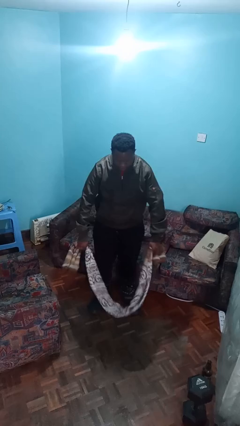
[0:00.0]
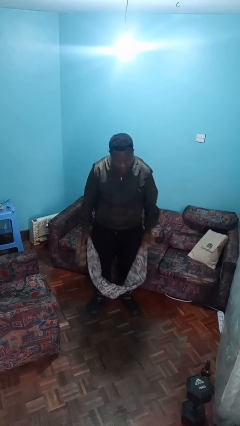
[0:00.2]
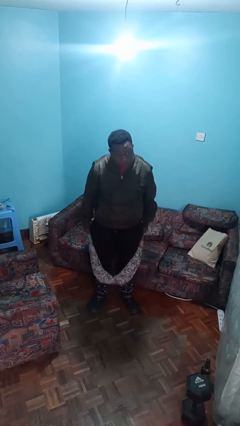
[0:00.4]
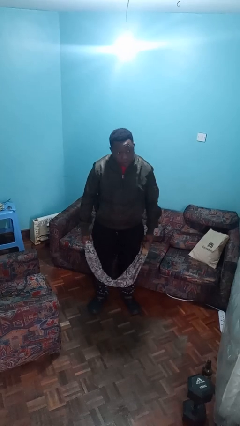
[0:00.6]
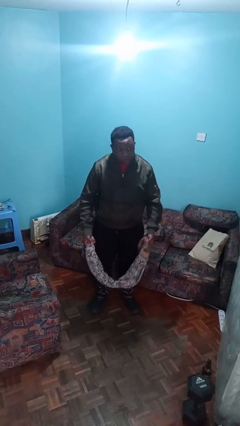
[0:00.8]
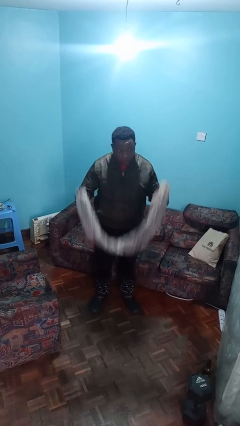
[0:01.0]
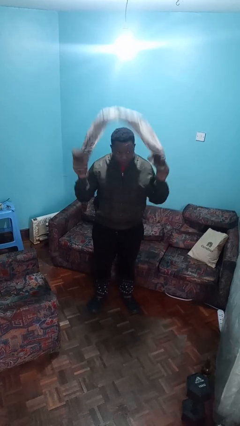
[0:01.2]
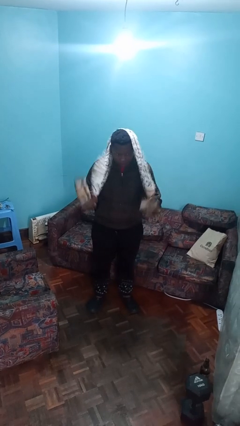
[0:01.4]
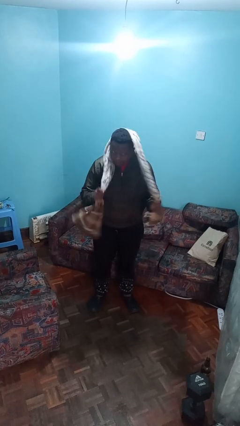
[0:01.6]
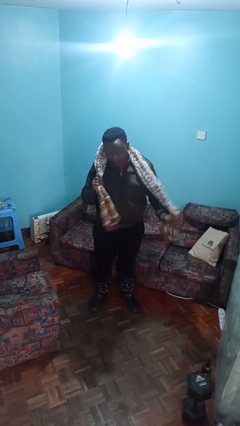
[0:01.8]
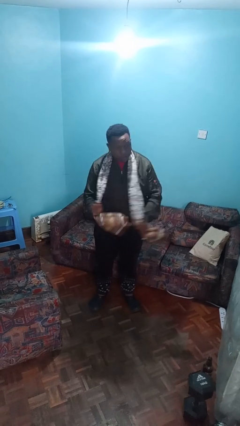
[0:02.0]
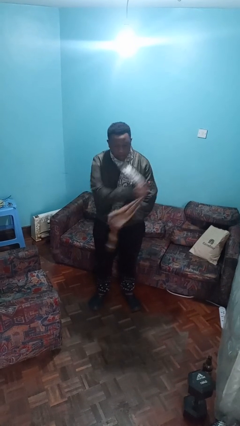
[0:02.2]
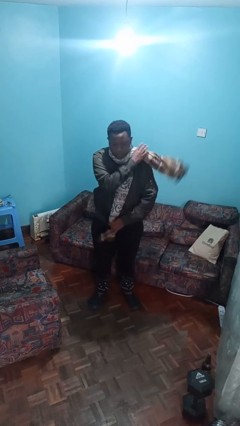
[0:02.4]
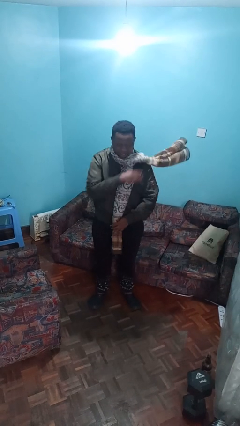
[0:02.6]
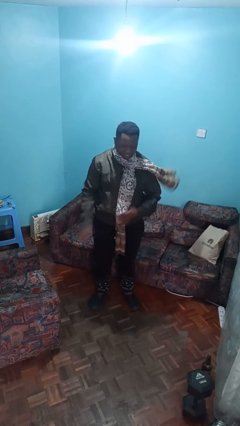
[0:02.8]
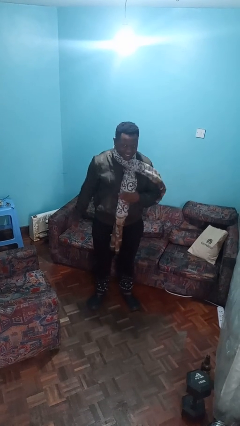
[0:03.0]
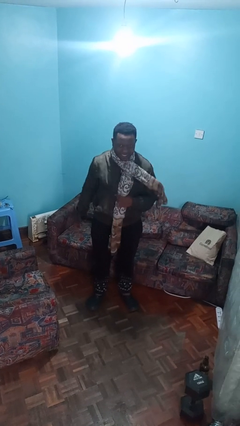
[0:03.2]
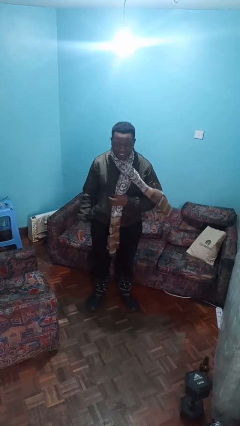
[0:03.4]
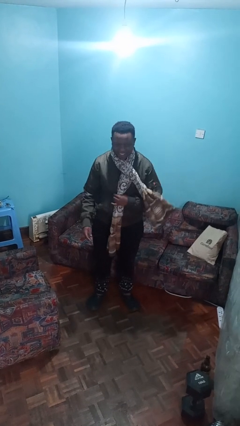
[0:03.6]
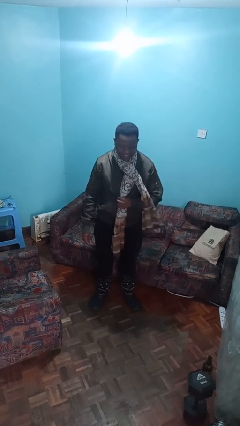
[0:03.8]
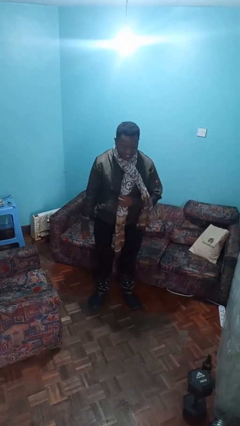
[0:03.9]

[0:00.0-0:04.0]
person puts on scarf

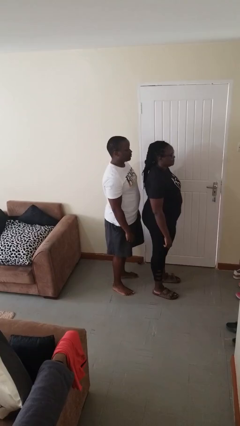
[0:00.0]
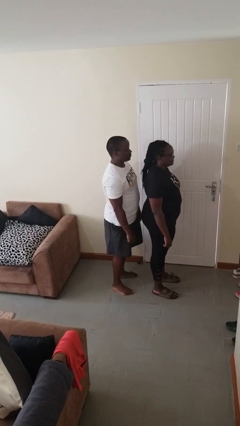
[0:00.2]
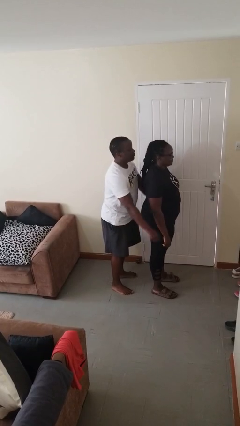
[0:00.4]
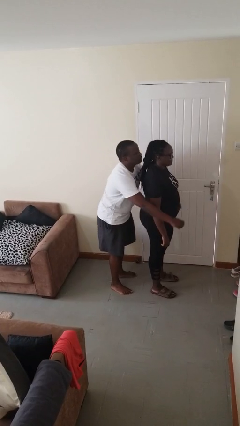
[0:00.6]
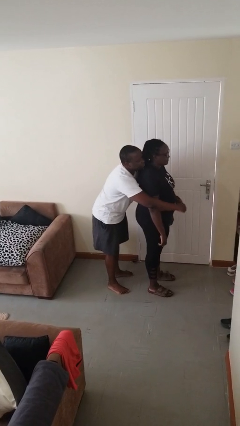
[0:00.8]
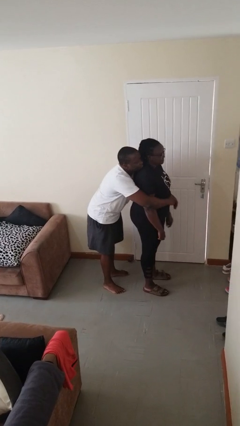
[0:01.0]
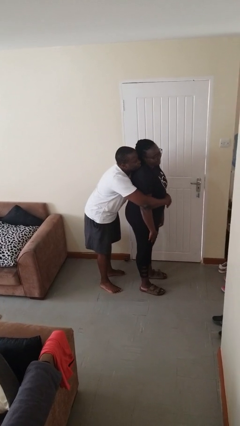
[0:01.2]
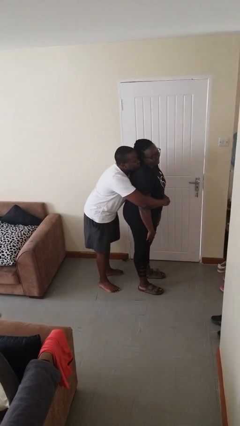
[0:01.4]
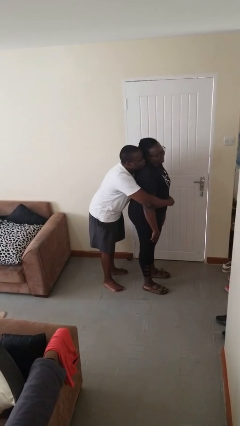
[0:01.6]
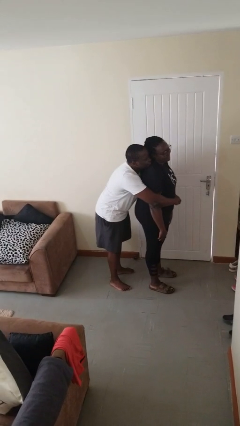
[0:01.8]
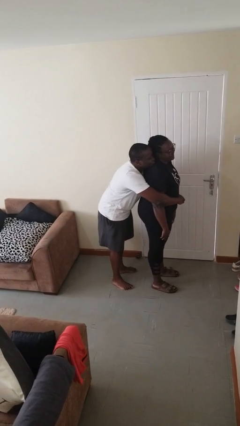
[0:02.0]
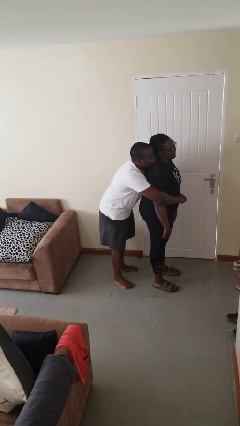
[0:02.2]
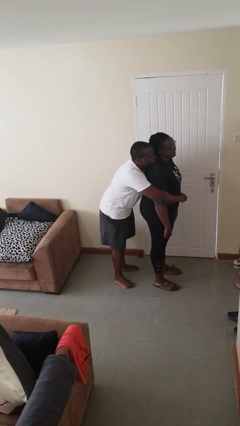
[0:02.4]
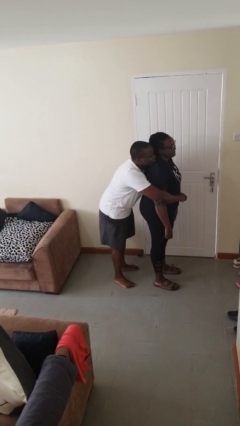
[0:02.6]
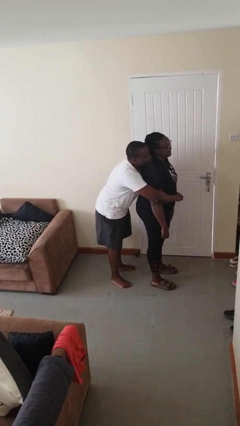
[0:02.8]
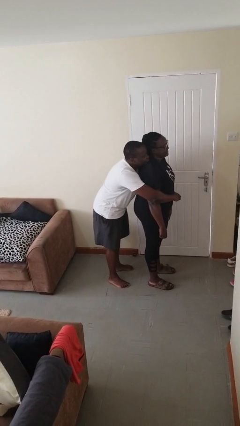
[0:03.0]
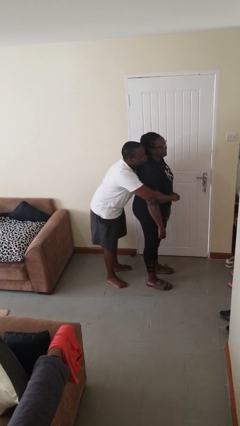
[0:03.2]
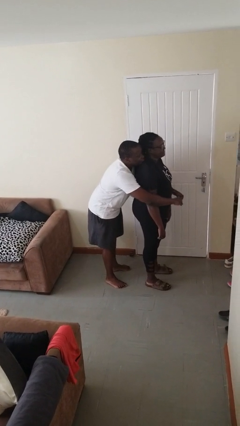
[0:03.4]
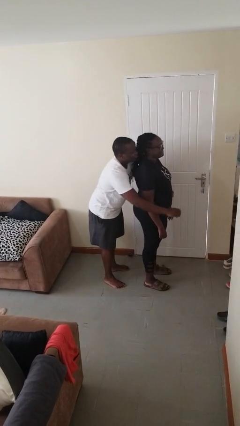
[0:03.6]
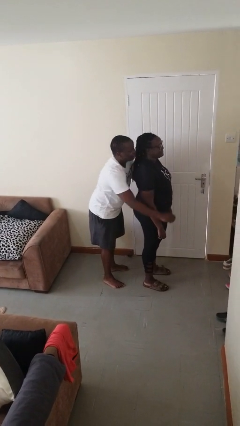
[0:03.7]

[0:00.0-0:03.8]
person hugs person from behind

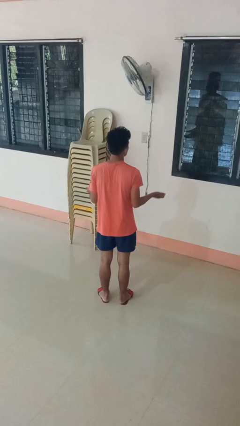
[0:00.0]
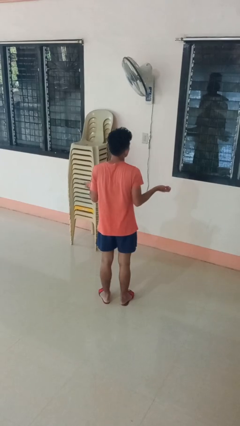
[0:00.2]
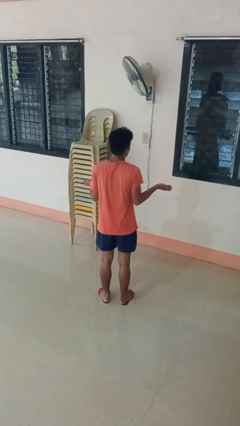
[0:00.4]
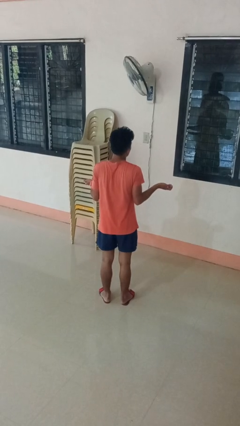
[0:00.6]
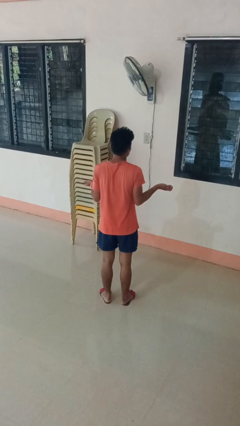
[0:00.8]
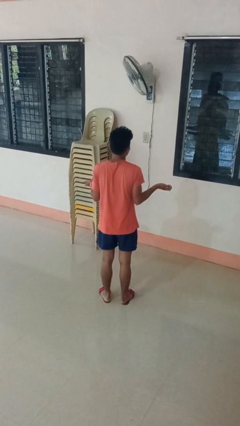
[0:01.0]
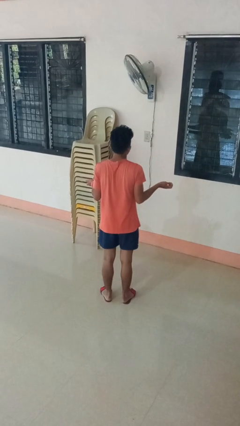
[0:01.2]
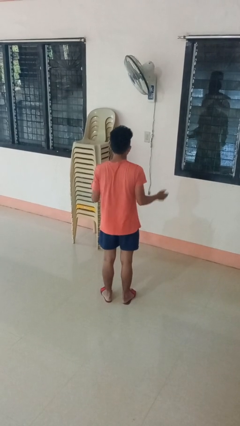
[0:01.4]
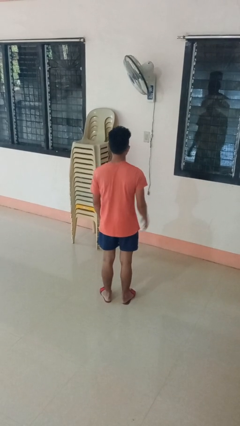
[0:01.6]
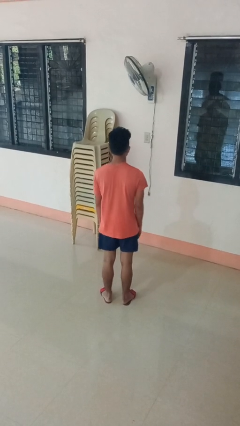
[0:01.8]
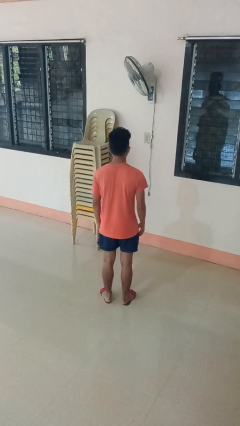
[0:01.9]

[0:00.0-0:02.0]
person shrugs

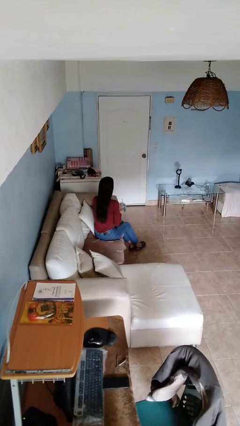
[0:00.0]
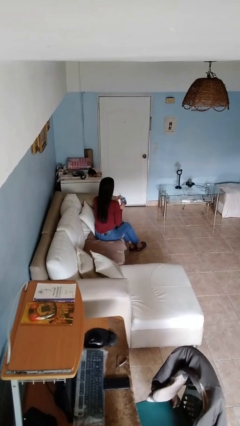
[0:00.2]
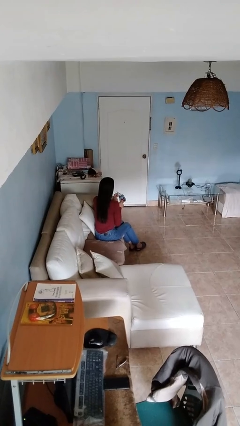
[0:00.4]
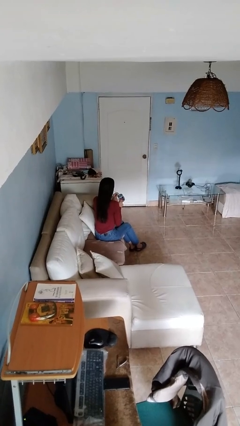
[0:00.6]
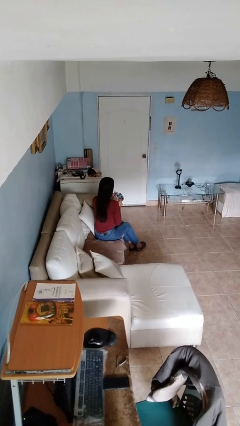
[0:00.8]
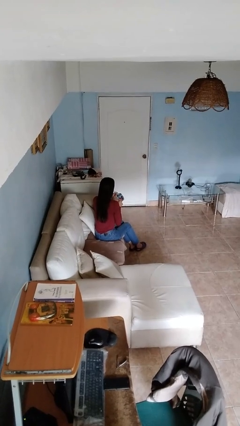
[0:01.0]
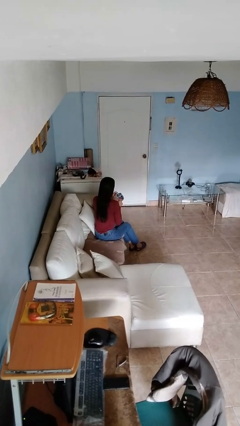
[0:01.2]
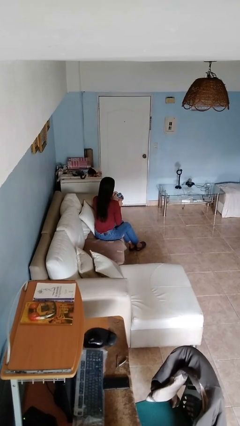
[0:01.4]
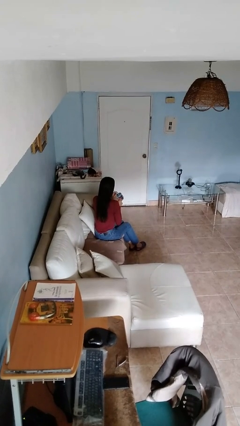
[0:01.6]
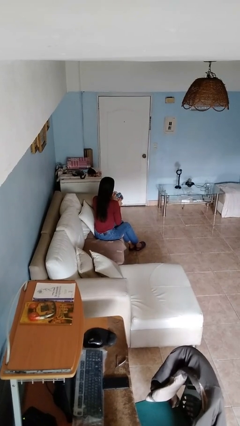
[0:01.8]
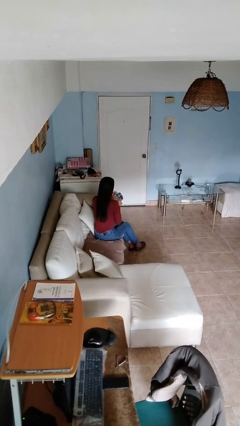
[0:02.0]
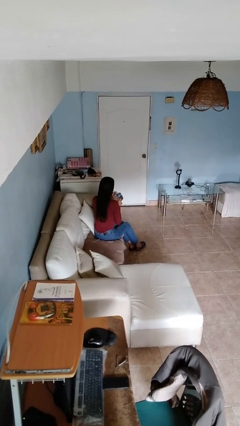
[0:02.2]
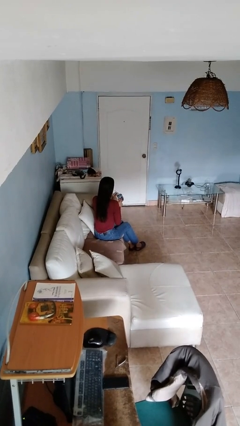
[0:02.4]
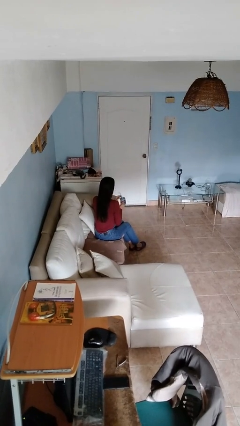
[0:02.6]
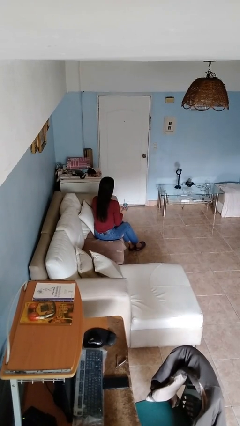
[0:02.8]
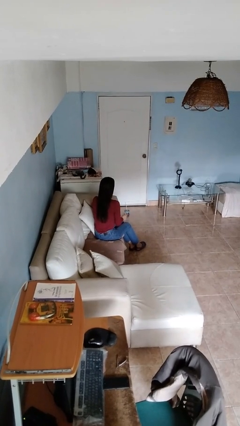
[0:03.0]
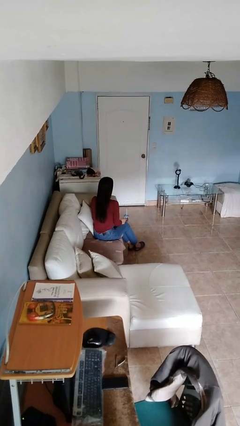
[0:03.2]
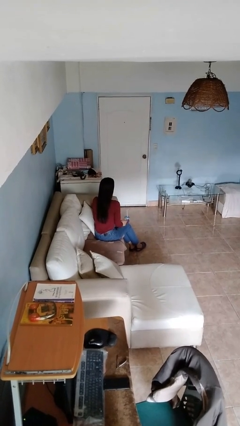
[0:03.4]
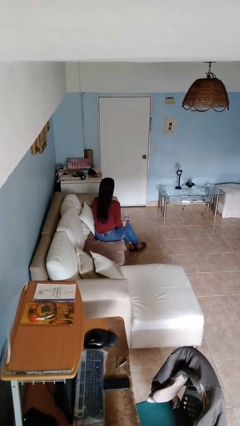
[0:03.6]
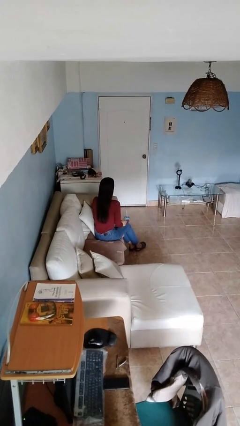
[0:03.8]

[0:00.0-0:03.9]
person drinks from straw

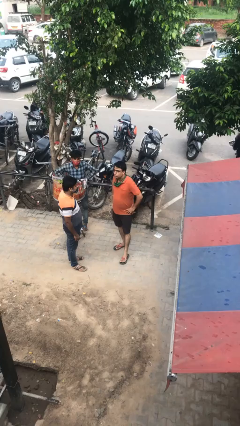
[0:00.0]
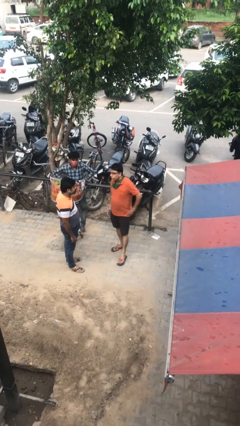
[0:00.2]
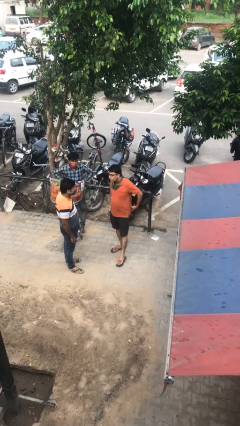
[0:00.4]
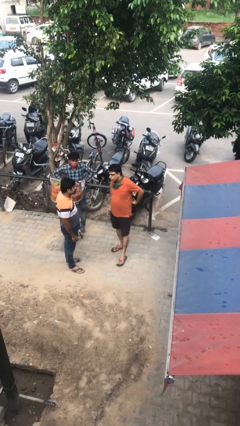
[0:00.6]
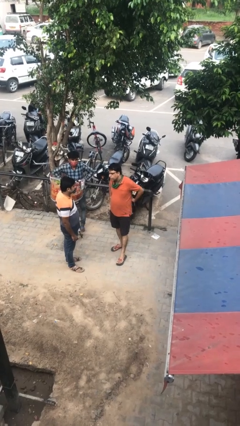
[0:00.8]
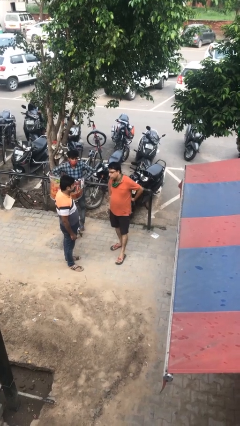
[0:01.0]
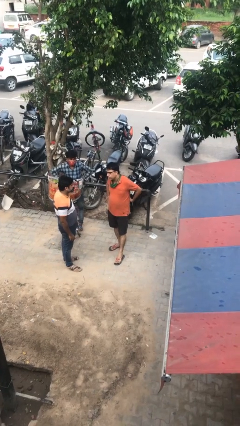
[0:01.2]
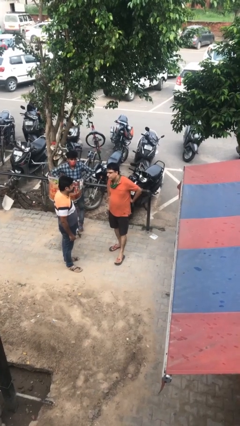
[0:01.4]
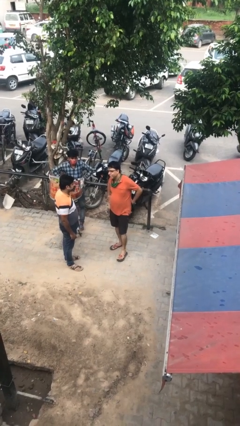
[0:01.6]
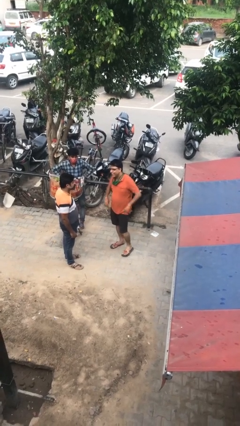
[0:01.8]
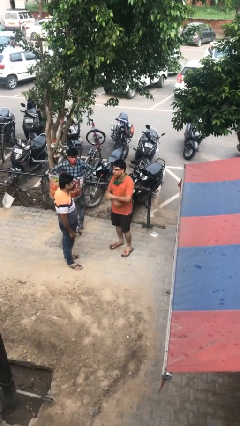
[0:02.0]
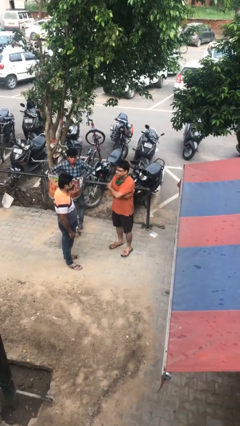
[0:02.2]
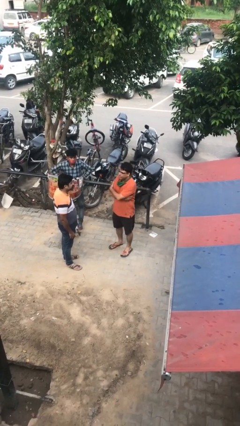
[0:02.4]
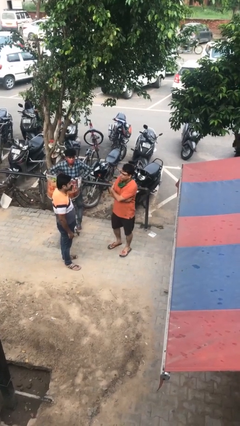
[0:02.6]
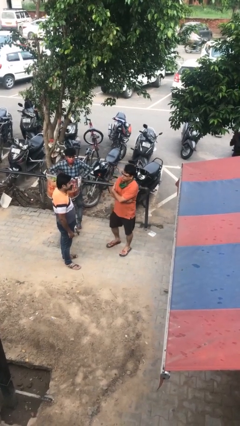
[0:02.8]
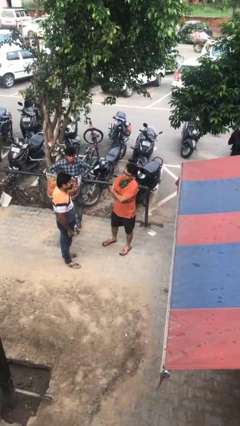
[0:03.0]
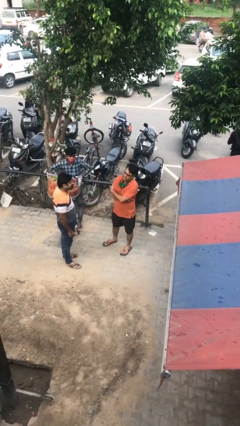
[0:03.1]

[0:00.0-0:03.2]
person laughs with person

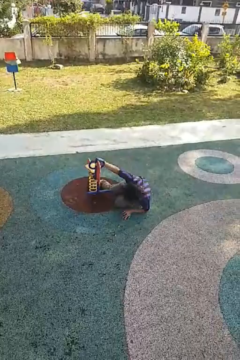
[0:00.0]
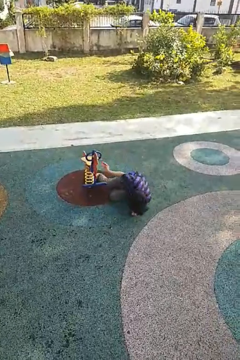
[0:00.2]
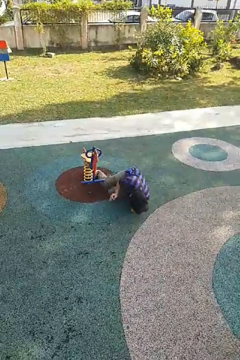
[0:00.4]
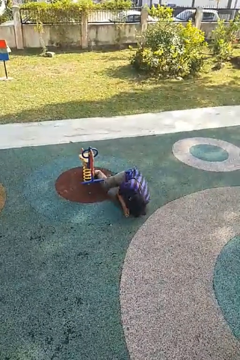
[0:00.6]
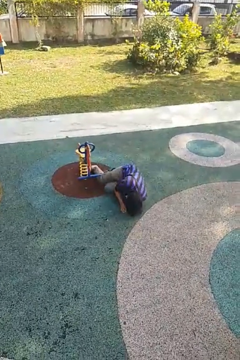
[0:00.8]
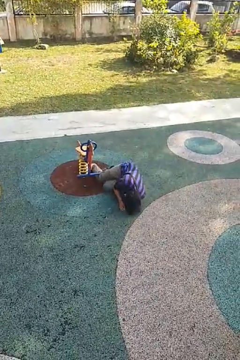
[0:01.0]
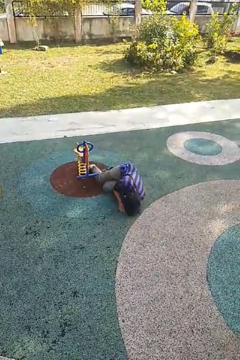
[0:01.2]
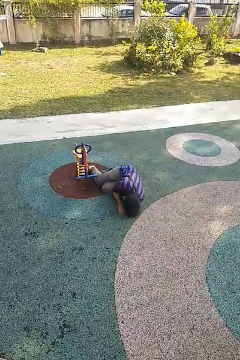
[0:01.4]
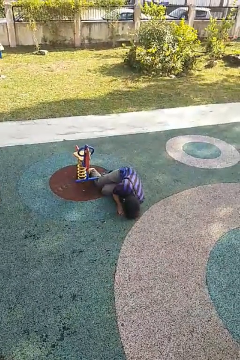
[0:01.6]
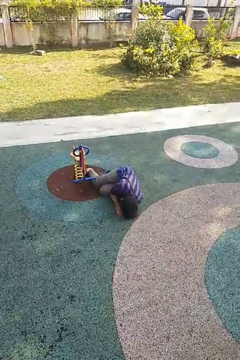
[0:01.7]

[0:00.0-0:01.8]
person lies down on floor
